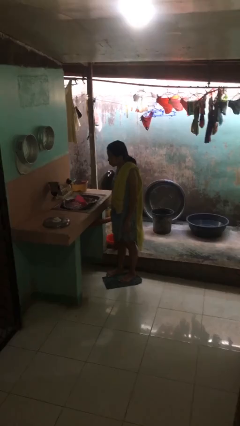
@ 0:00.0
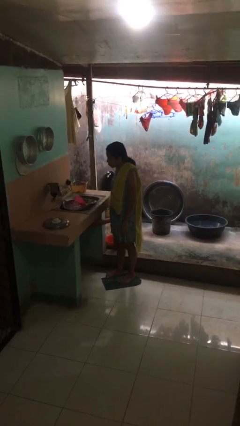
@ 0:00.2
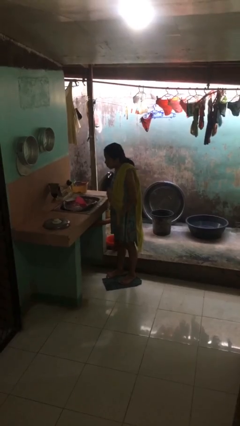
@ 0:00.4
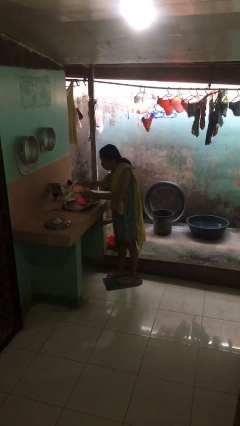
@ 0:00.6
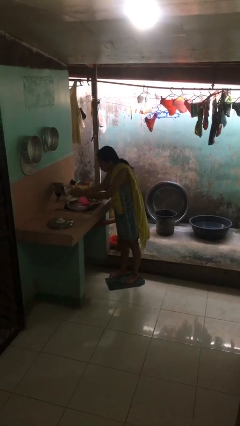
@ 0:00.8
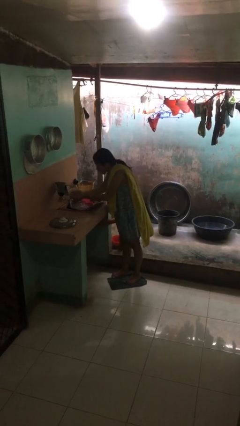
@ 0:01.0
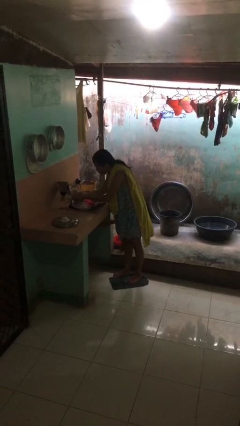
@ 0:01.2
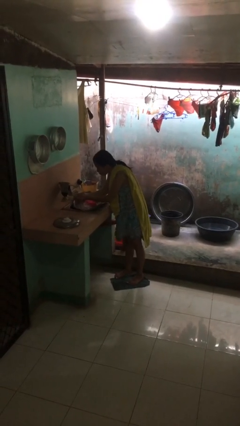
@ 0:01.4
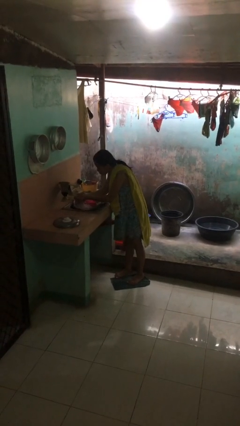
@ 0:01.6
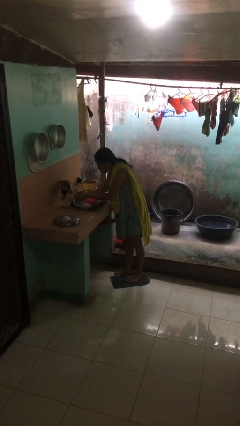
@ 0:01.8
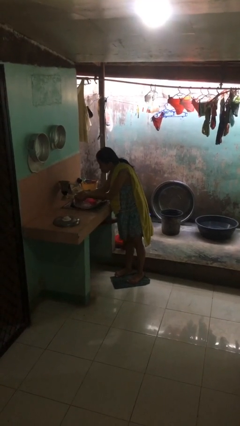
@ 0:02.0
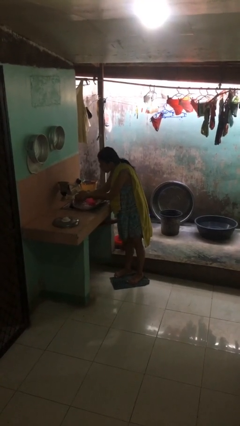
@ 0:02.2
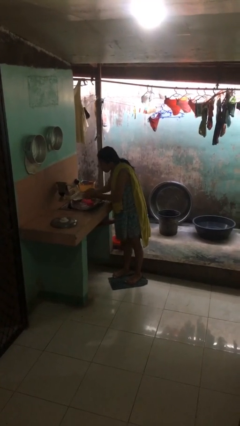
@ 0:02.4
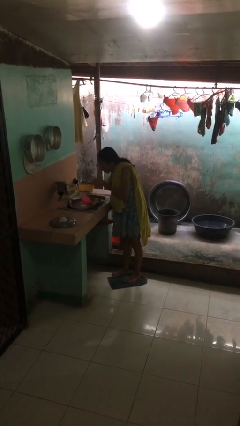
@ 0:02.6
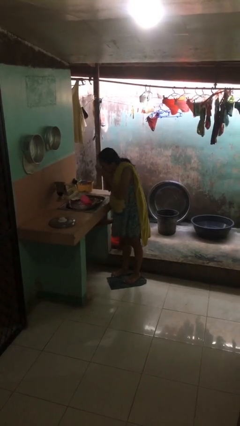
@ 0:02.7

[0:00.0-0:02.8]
person washes face

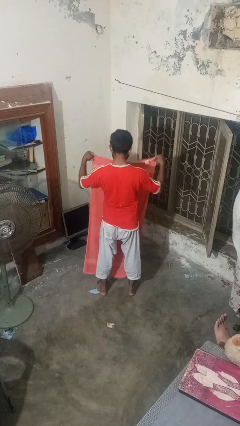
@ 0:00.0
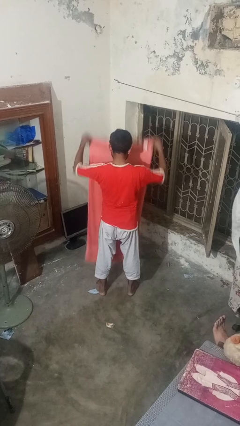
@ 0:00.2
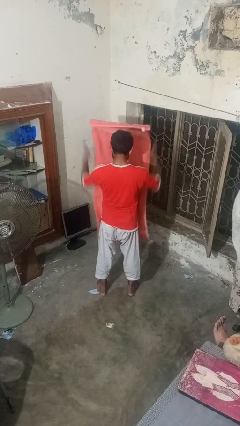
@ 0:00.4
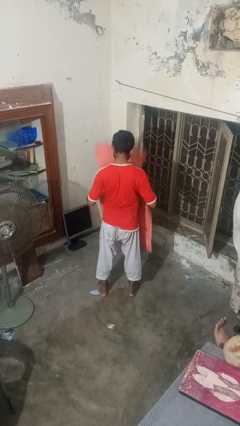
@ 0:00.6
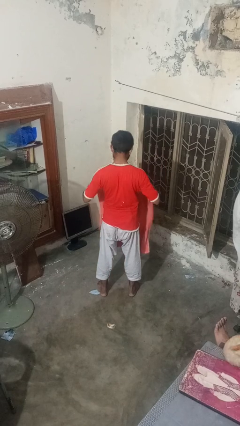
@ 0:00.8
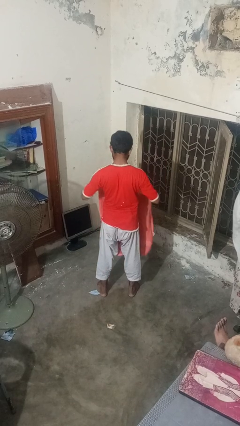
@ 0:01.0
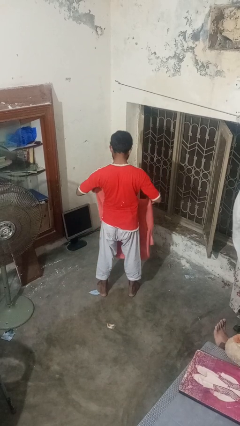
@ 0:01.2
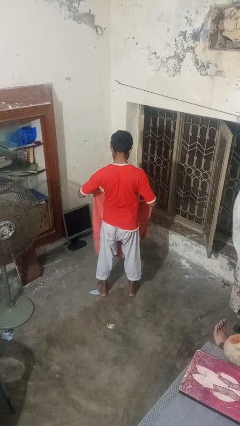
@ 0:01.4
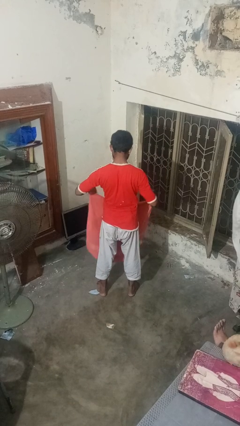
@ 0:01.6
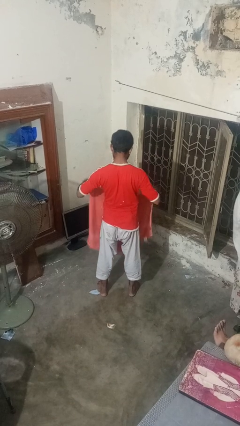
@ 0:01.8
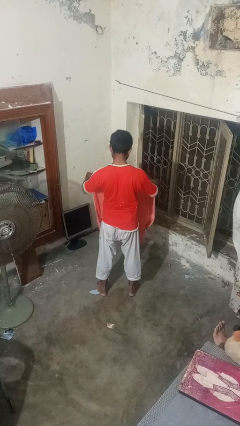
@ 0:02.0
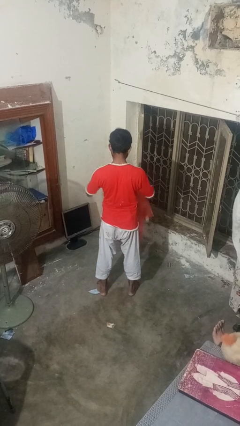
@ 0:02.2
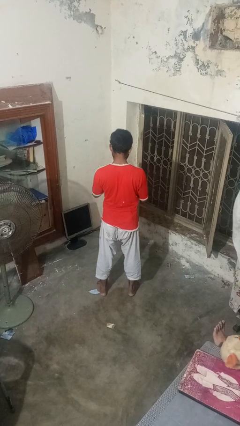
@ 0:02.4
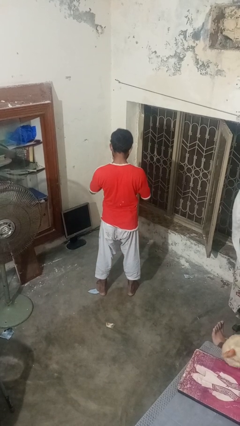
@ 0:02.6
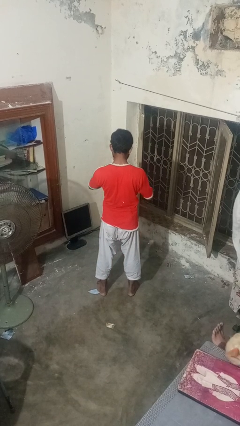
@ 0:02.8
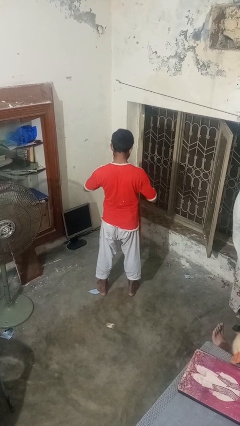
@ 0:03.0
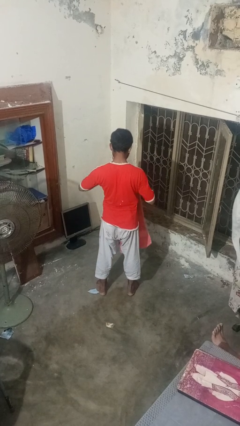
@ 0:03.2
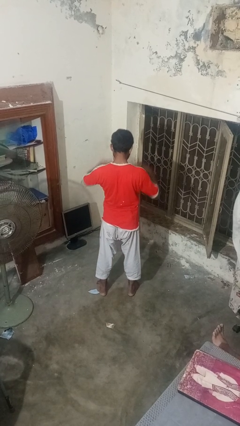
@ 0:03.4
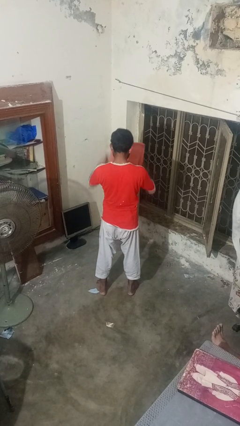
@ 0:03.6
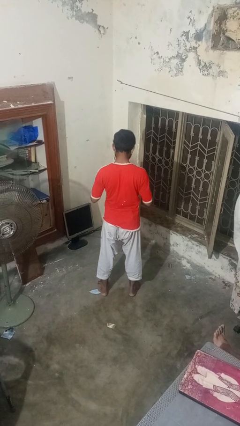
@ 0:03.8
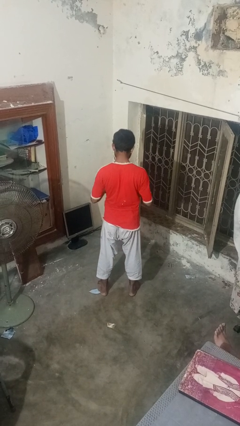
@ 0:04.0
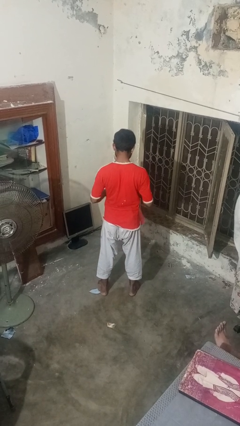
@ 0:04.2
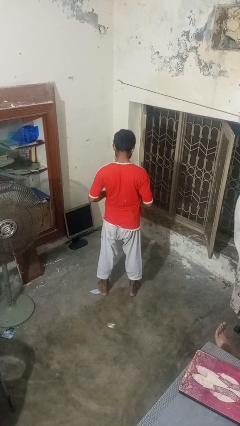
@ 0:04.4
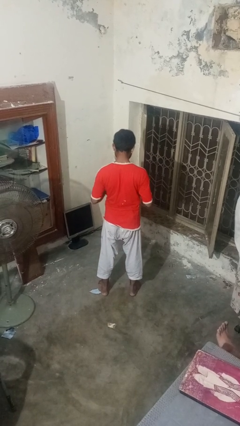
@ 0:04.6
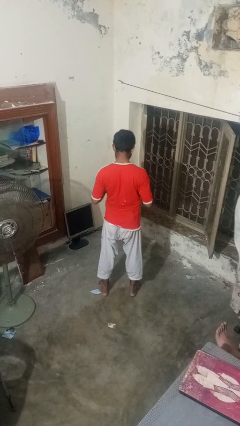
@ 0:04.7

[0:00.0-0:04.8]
person folds towel

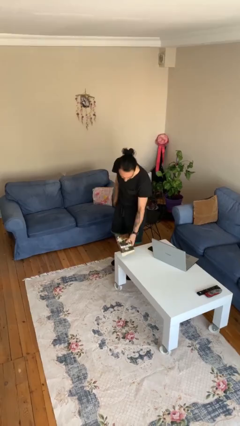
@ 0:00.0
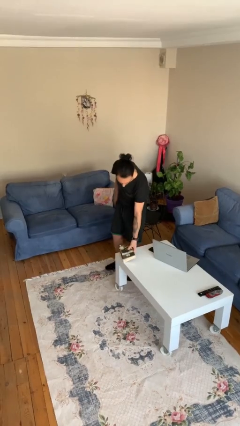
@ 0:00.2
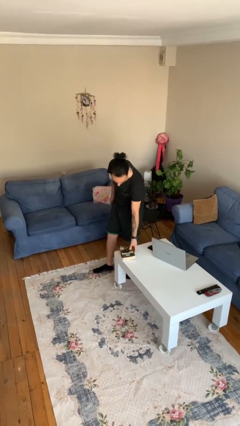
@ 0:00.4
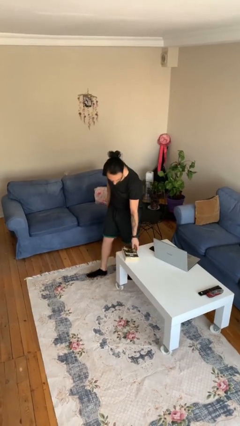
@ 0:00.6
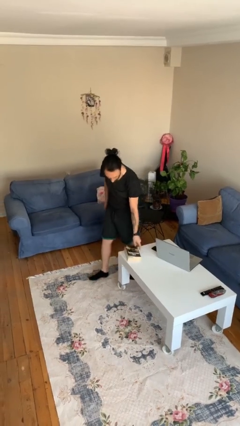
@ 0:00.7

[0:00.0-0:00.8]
person puts down object on table

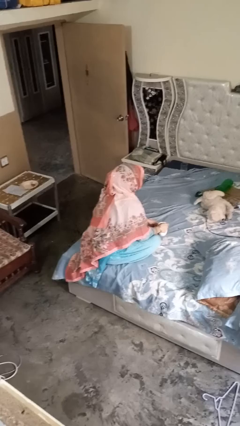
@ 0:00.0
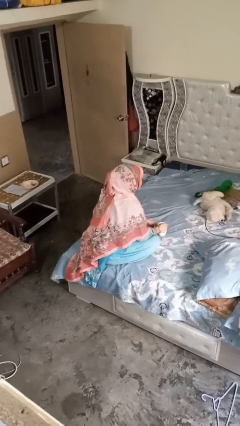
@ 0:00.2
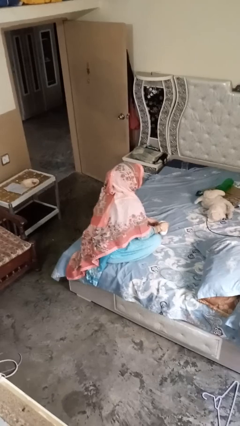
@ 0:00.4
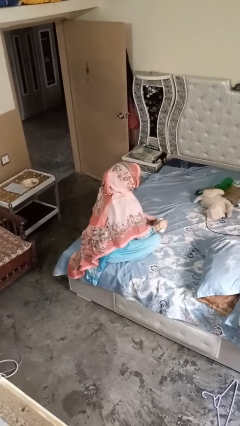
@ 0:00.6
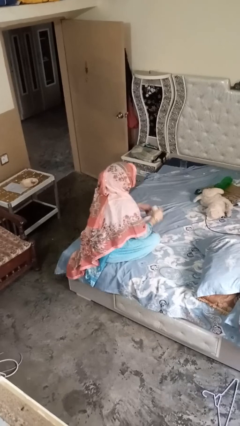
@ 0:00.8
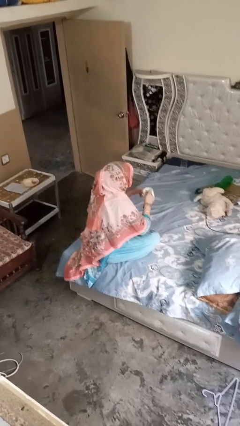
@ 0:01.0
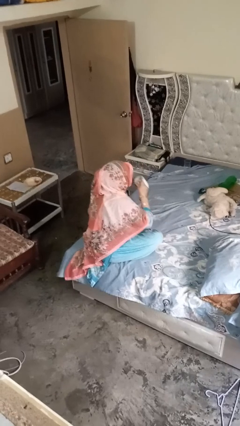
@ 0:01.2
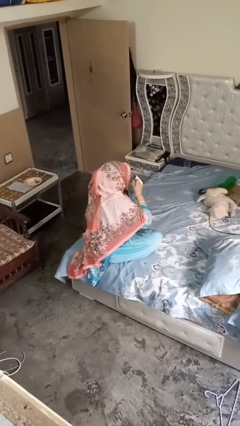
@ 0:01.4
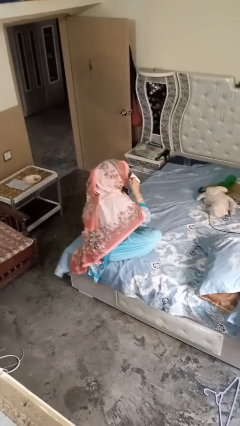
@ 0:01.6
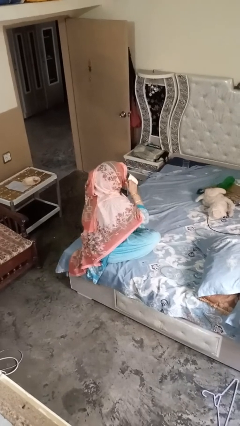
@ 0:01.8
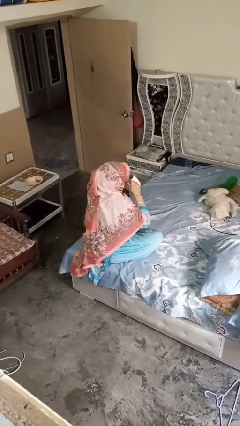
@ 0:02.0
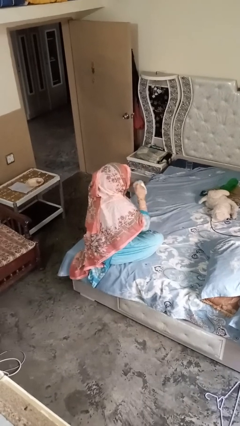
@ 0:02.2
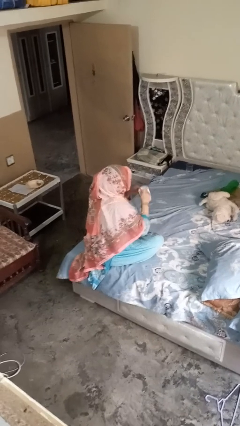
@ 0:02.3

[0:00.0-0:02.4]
person drinks from mug

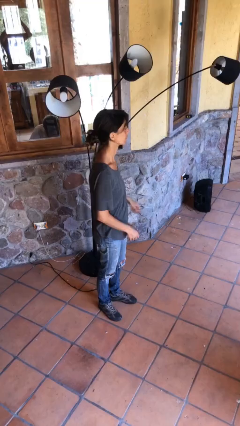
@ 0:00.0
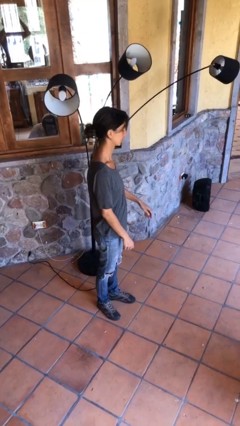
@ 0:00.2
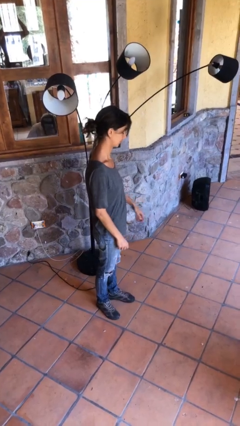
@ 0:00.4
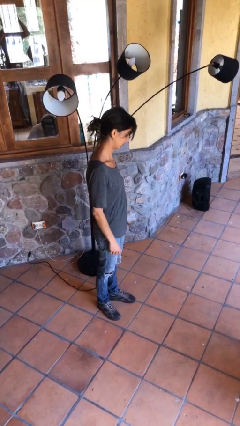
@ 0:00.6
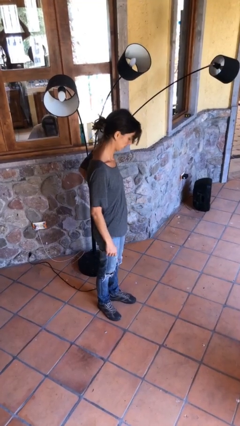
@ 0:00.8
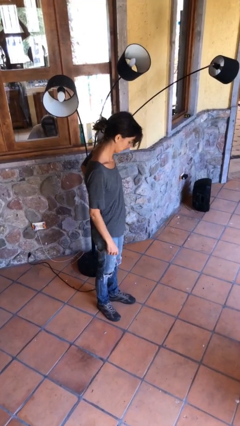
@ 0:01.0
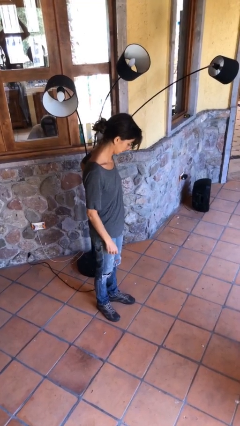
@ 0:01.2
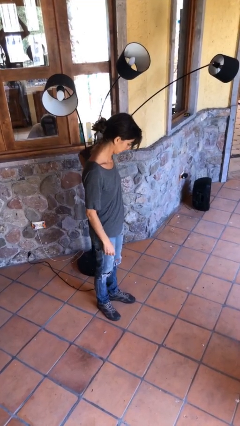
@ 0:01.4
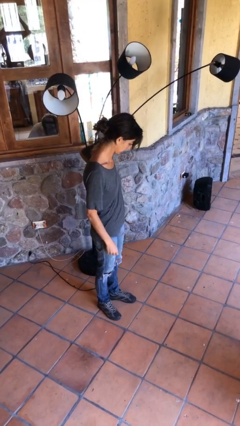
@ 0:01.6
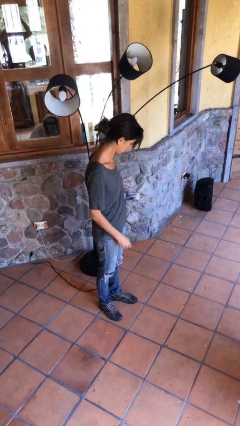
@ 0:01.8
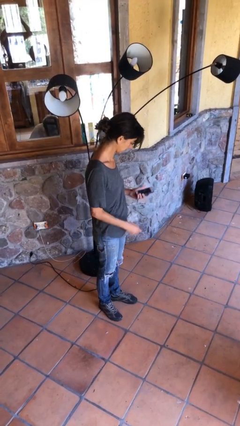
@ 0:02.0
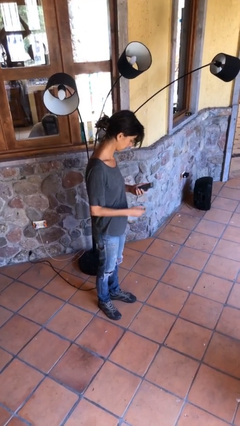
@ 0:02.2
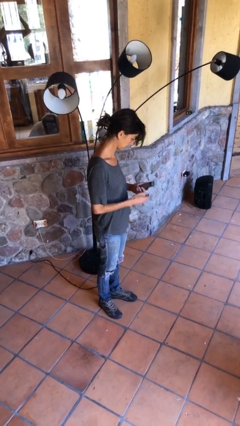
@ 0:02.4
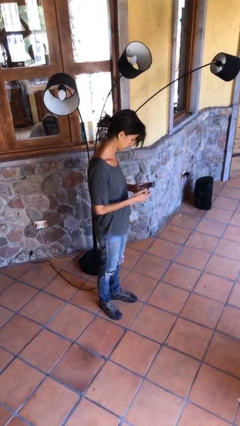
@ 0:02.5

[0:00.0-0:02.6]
person takes phone from pocket

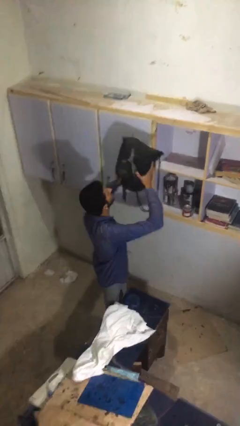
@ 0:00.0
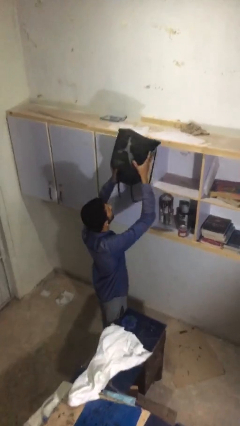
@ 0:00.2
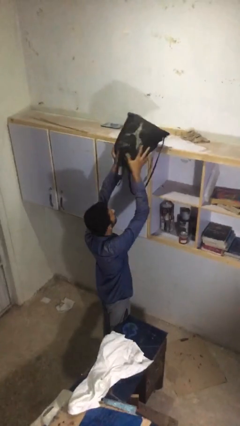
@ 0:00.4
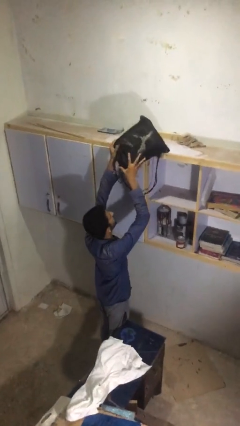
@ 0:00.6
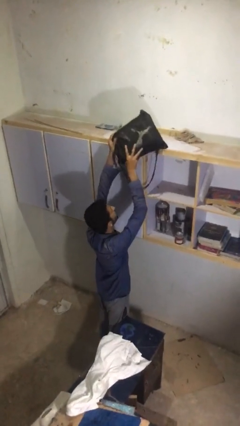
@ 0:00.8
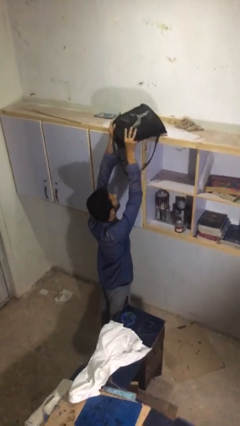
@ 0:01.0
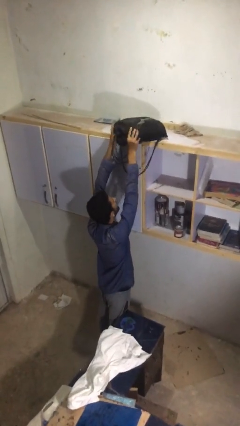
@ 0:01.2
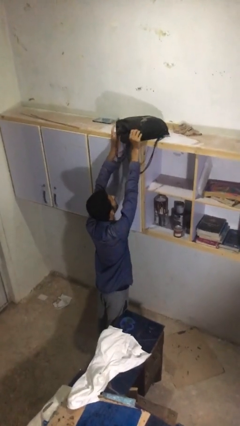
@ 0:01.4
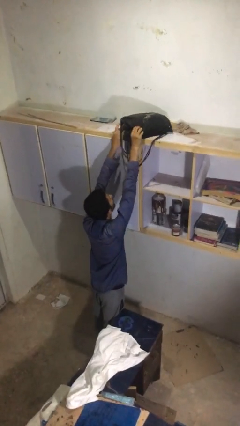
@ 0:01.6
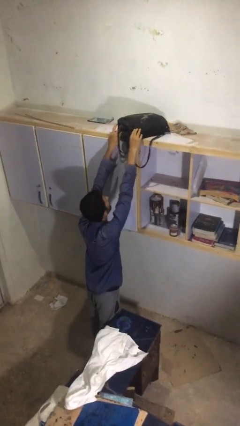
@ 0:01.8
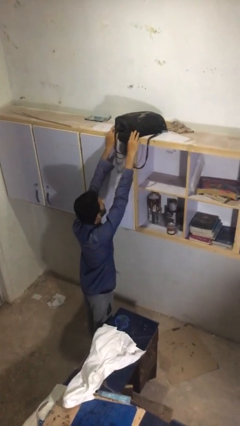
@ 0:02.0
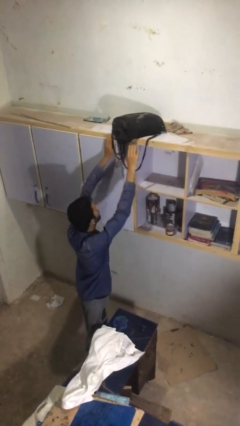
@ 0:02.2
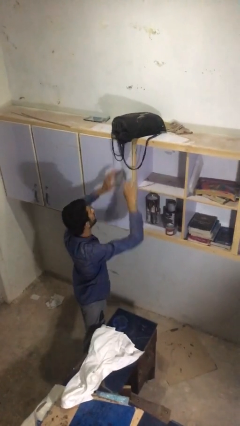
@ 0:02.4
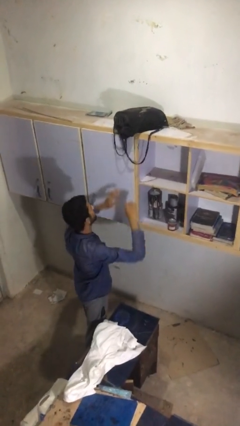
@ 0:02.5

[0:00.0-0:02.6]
person puts down object on shelf

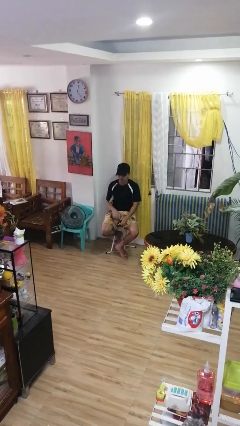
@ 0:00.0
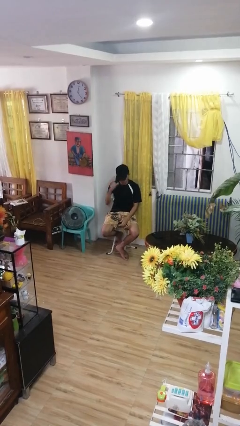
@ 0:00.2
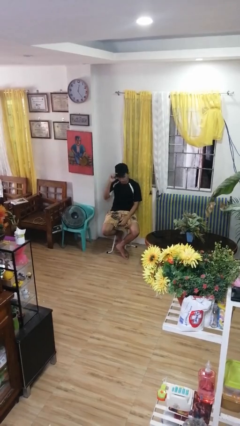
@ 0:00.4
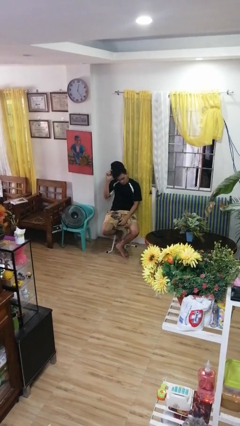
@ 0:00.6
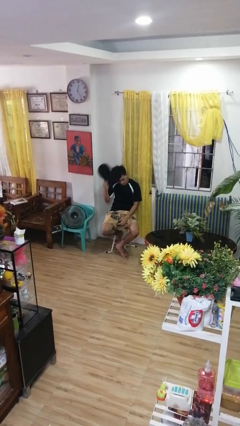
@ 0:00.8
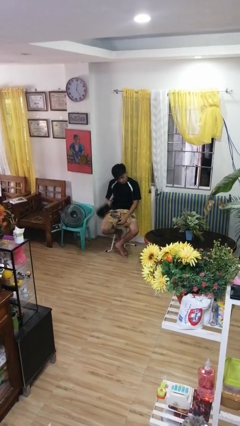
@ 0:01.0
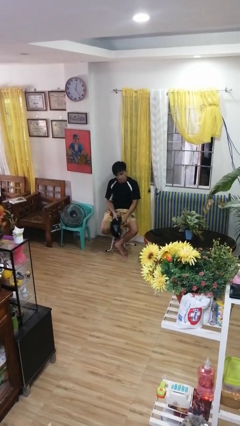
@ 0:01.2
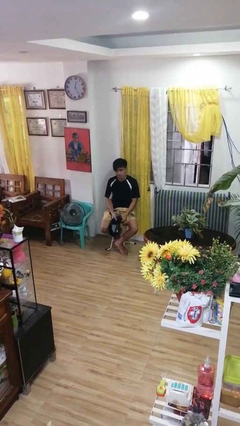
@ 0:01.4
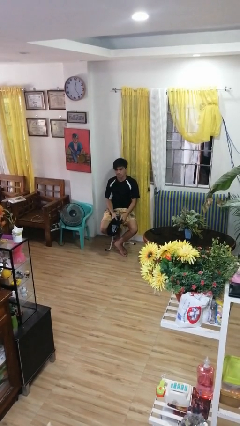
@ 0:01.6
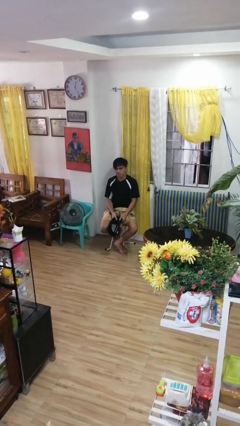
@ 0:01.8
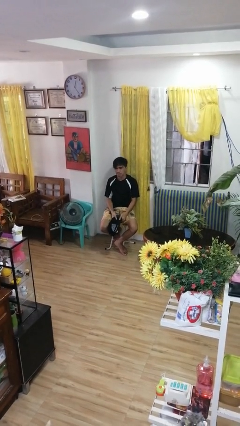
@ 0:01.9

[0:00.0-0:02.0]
person takes off hat
